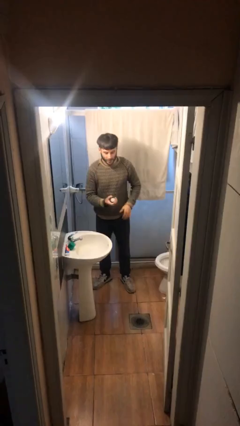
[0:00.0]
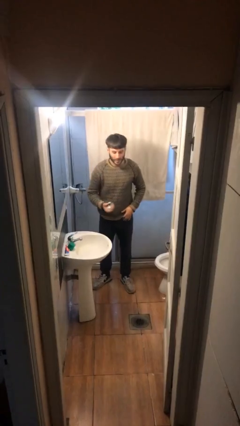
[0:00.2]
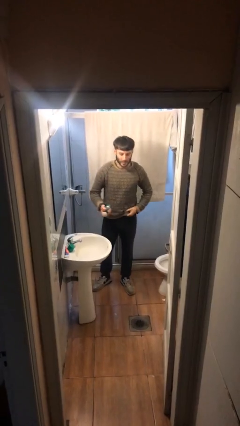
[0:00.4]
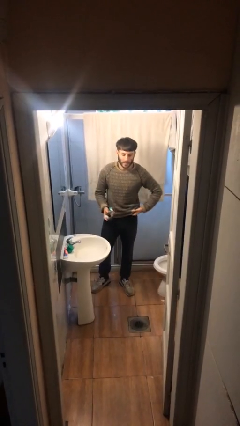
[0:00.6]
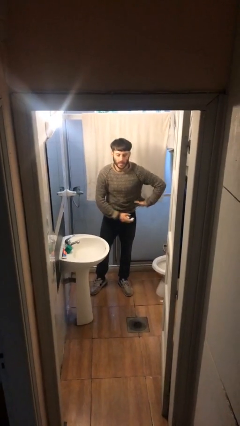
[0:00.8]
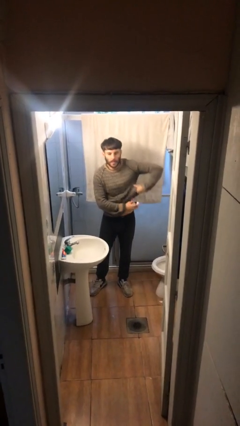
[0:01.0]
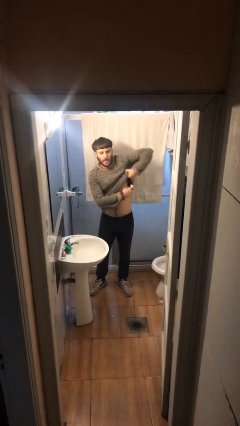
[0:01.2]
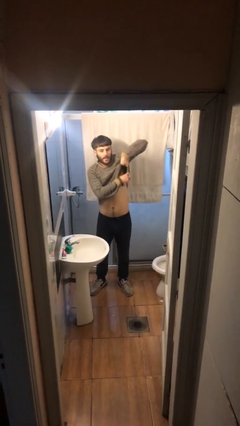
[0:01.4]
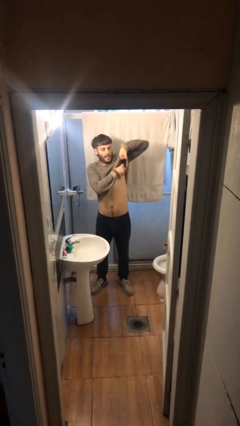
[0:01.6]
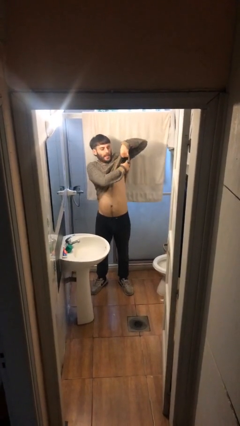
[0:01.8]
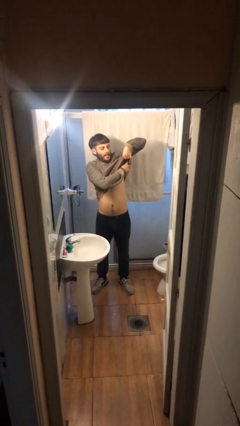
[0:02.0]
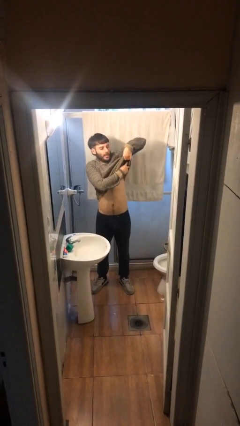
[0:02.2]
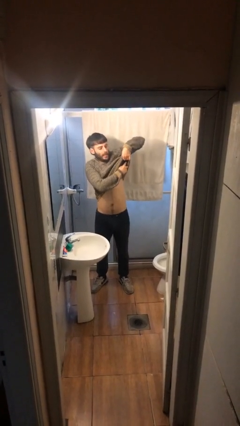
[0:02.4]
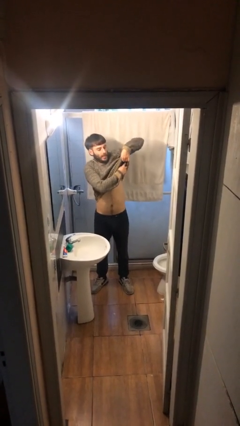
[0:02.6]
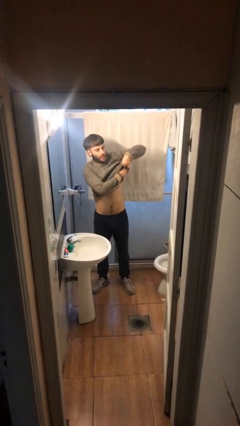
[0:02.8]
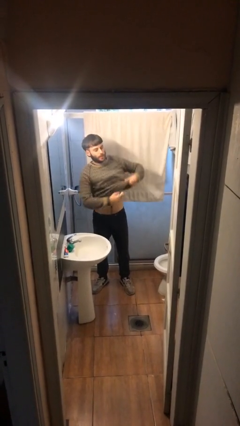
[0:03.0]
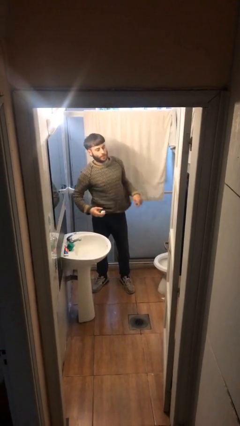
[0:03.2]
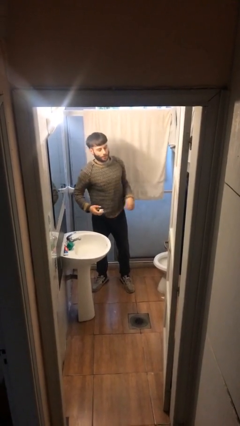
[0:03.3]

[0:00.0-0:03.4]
person applies deodorant

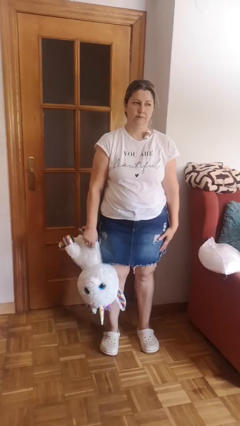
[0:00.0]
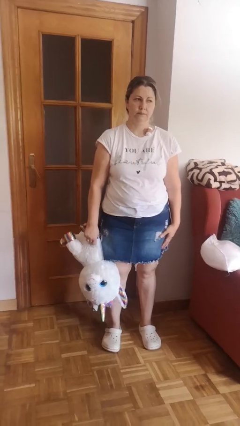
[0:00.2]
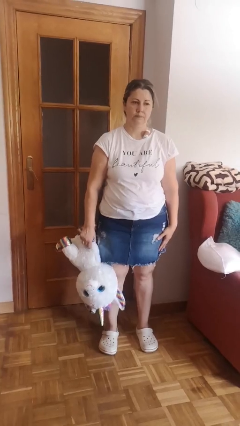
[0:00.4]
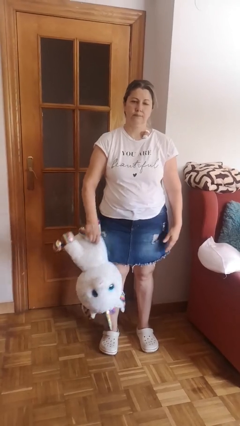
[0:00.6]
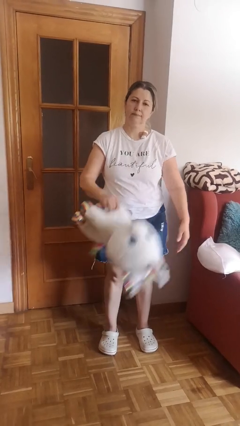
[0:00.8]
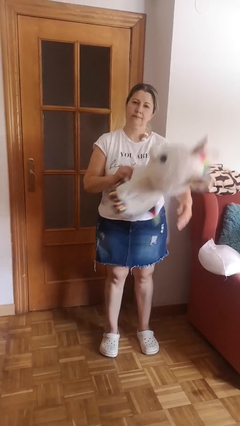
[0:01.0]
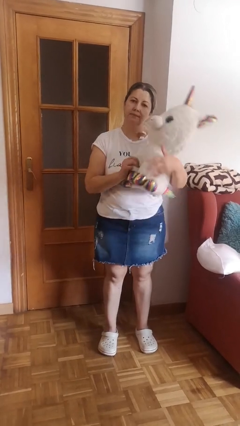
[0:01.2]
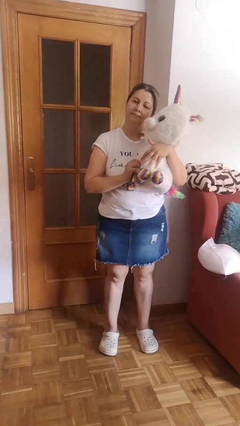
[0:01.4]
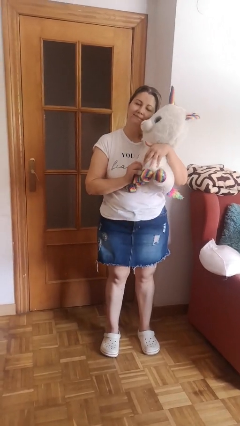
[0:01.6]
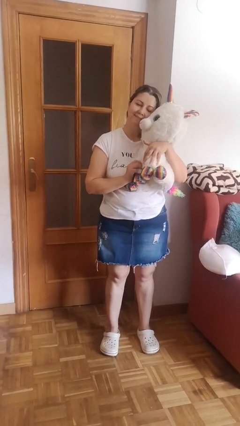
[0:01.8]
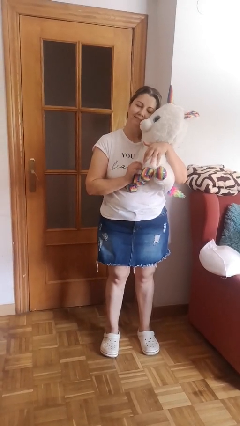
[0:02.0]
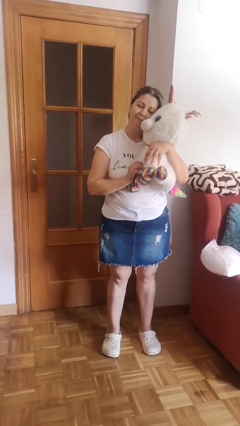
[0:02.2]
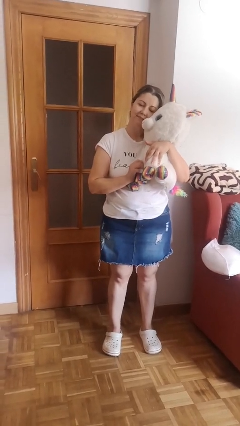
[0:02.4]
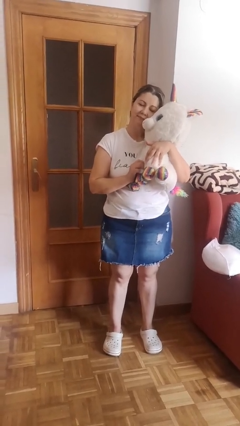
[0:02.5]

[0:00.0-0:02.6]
person hugs stuffed animal

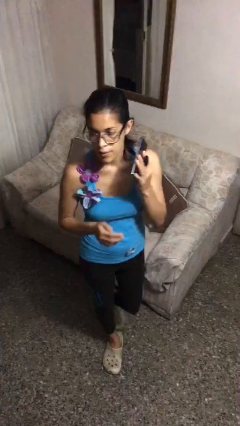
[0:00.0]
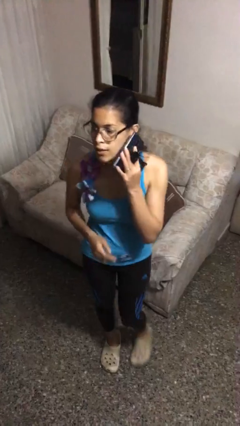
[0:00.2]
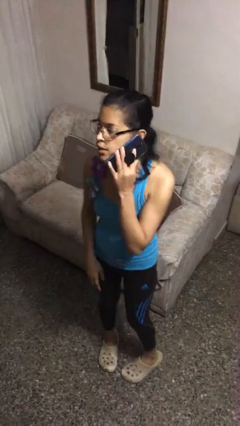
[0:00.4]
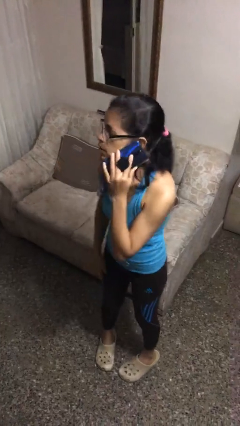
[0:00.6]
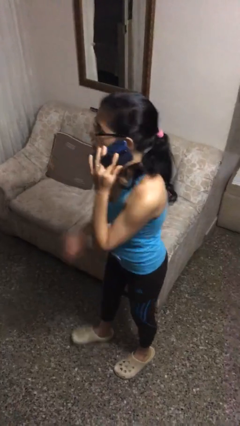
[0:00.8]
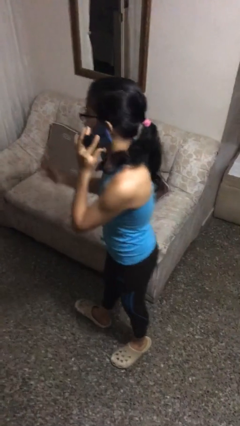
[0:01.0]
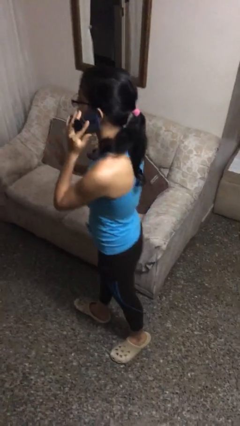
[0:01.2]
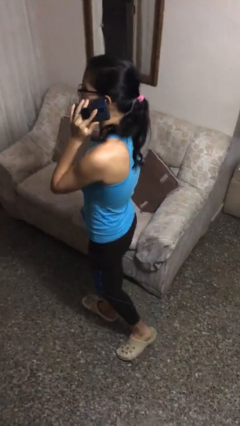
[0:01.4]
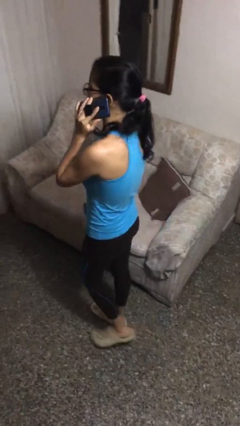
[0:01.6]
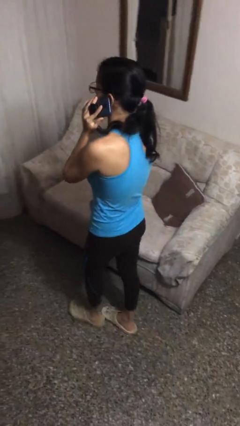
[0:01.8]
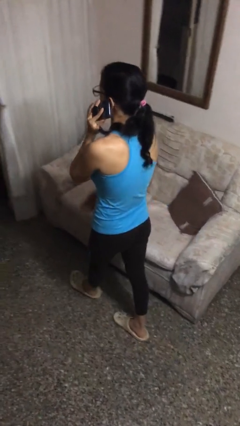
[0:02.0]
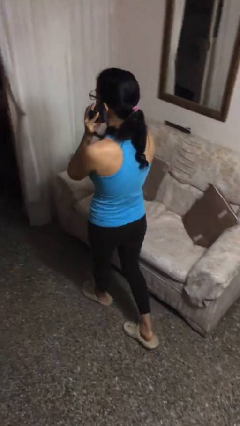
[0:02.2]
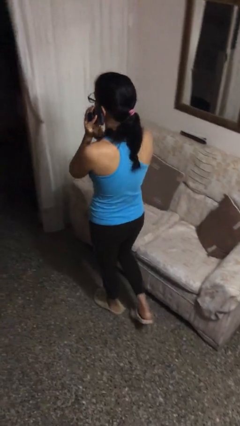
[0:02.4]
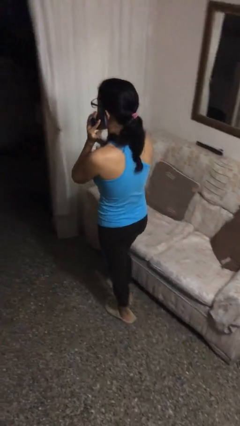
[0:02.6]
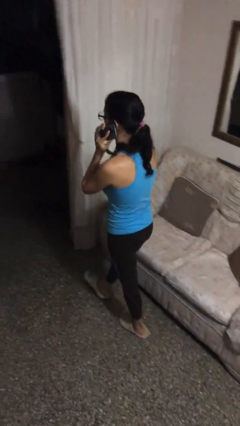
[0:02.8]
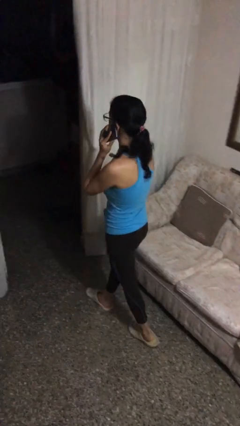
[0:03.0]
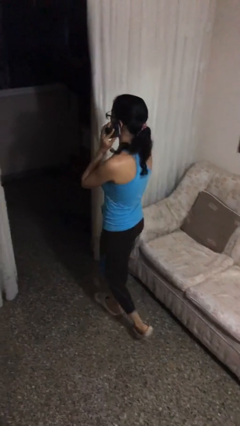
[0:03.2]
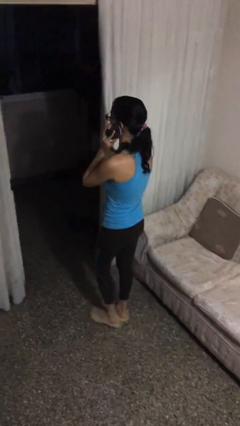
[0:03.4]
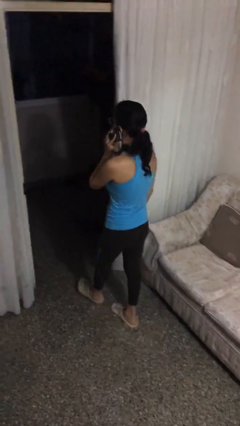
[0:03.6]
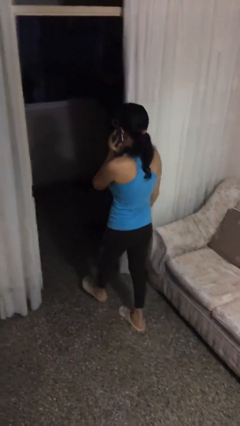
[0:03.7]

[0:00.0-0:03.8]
person talks on phone

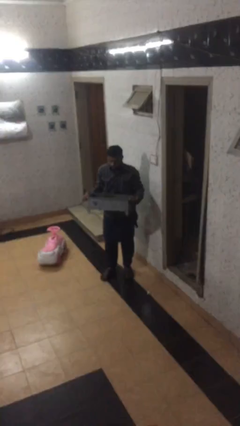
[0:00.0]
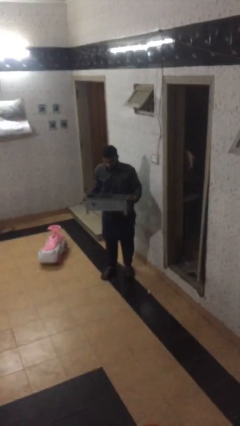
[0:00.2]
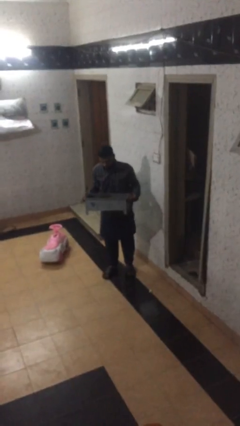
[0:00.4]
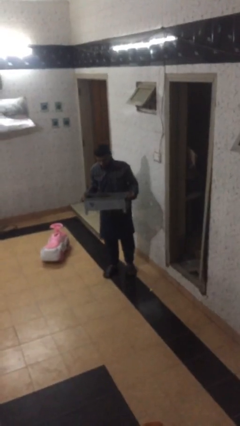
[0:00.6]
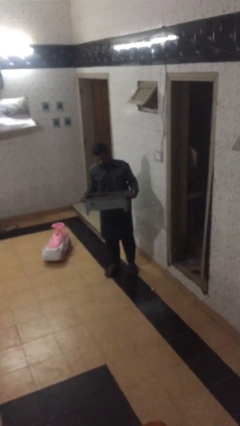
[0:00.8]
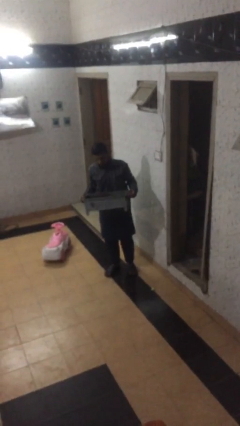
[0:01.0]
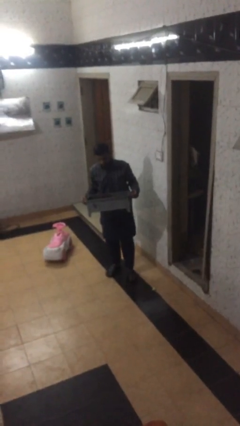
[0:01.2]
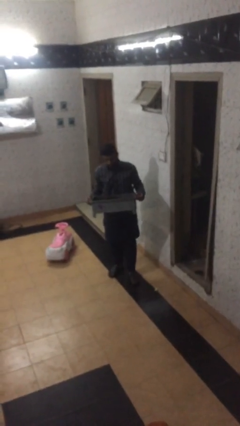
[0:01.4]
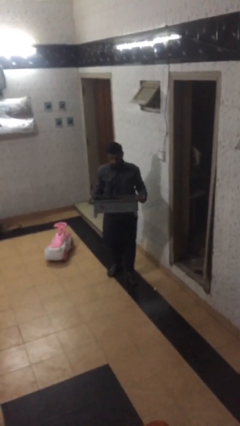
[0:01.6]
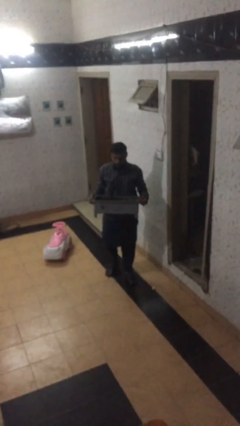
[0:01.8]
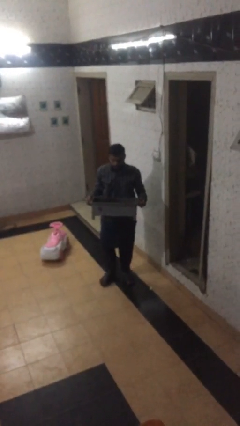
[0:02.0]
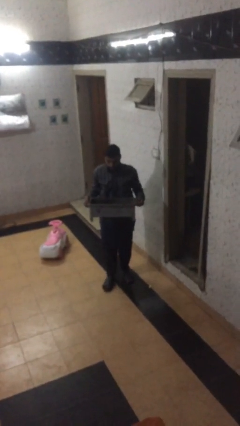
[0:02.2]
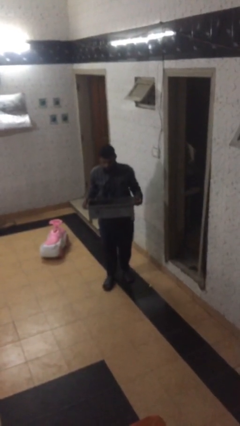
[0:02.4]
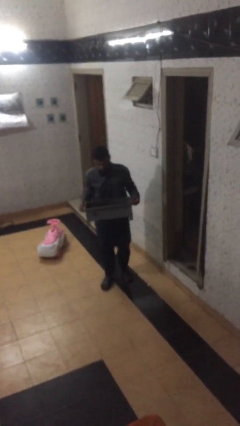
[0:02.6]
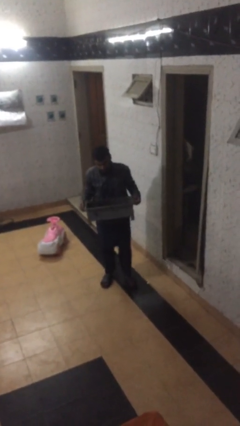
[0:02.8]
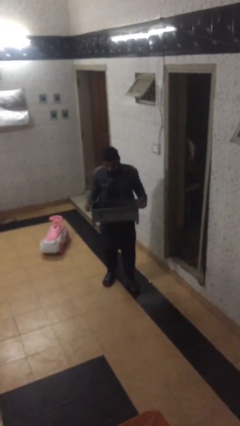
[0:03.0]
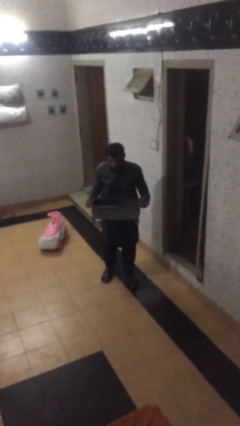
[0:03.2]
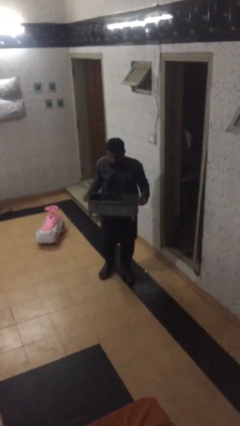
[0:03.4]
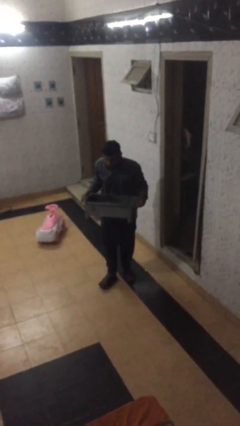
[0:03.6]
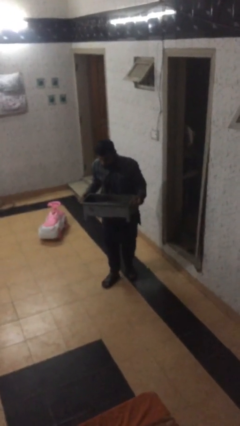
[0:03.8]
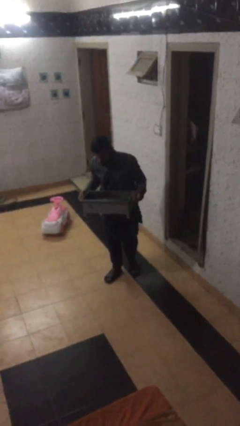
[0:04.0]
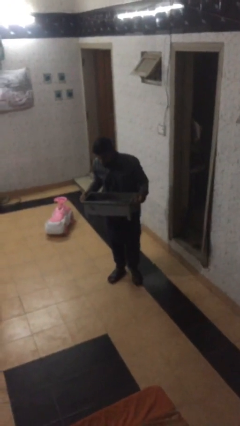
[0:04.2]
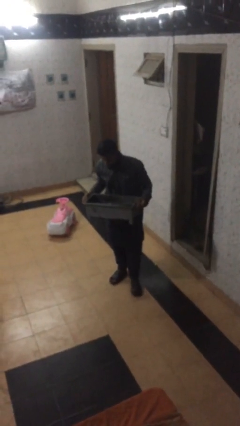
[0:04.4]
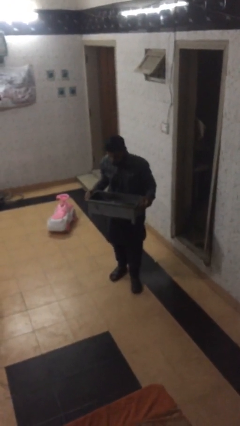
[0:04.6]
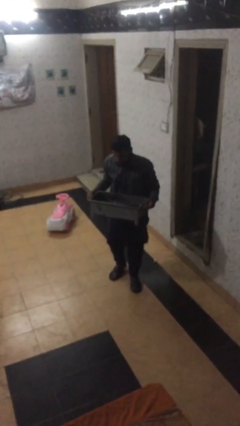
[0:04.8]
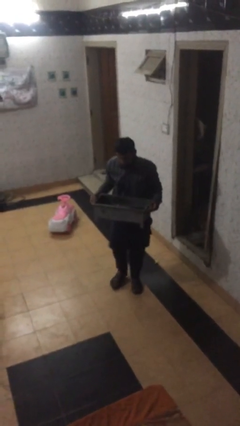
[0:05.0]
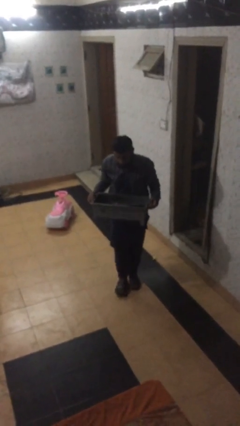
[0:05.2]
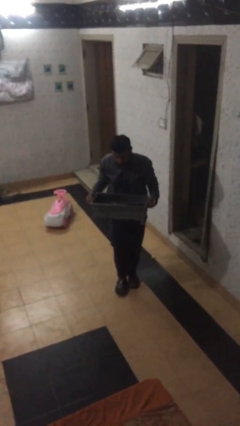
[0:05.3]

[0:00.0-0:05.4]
person carries heavy object

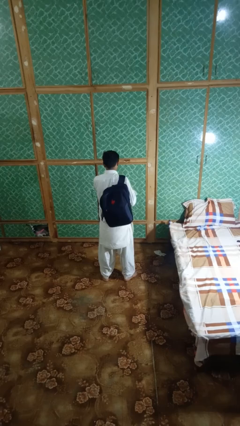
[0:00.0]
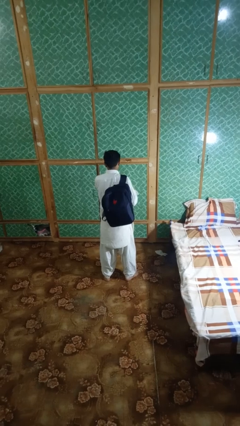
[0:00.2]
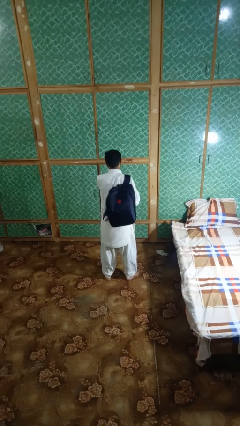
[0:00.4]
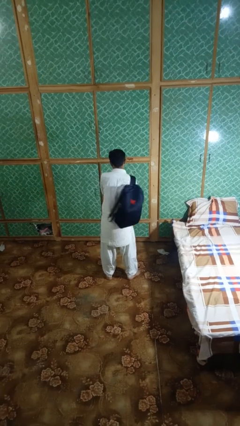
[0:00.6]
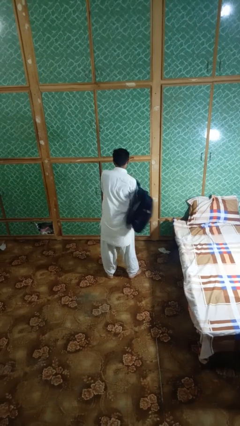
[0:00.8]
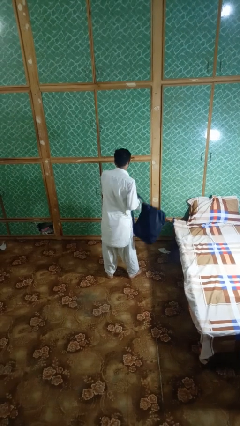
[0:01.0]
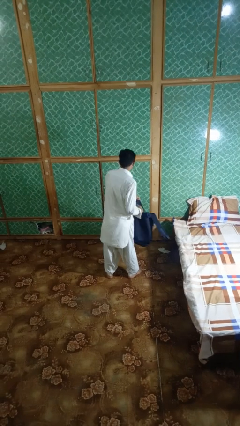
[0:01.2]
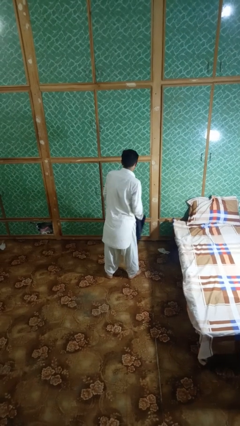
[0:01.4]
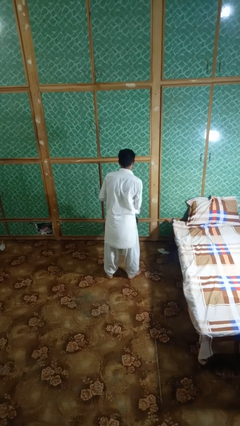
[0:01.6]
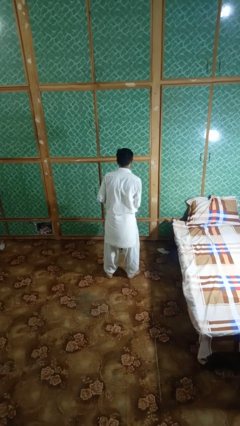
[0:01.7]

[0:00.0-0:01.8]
person takes off backpack

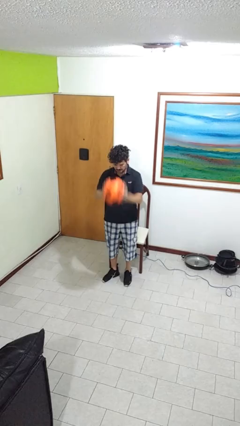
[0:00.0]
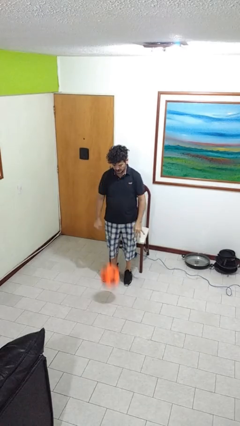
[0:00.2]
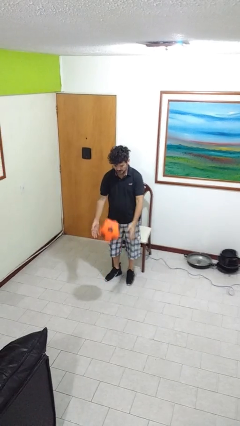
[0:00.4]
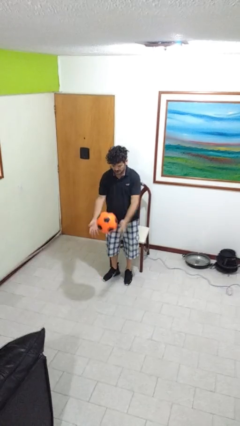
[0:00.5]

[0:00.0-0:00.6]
person bounces ball on floor
